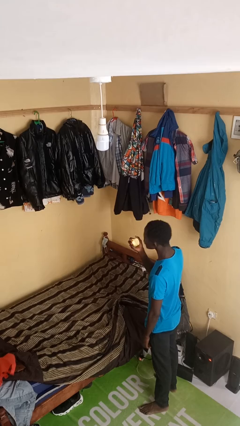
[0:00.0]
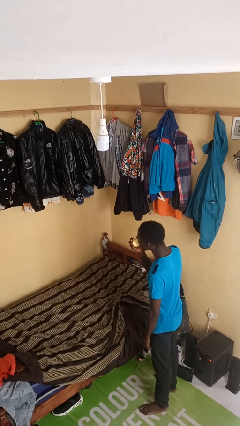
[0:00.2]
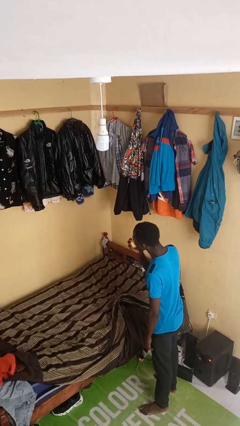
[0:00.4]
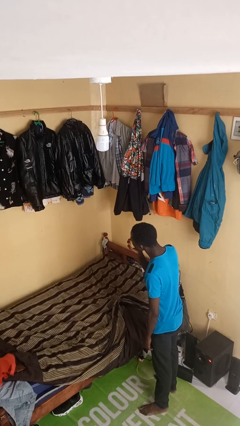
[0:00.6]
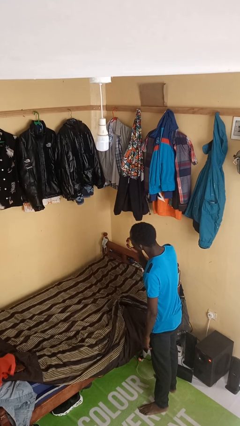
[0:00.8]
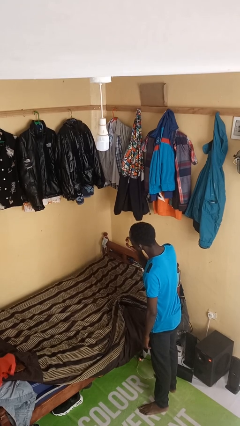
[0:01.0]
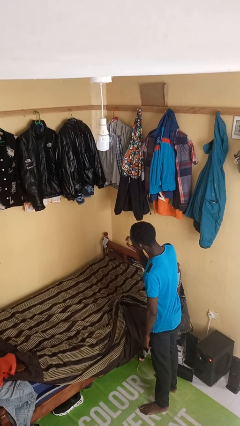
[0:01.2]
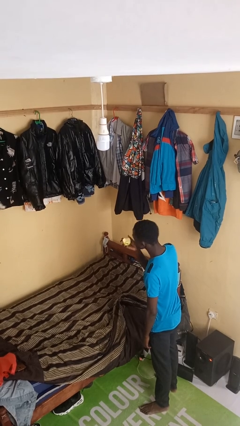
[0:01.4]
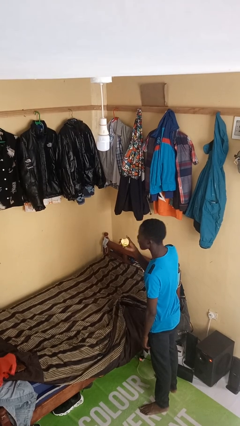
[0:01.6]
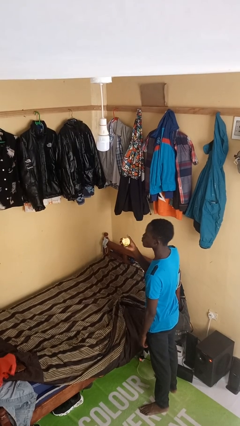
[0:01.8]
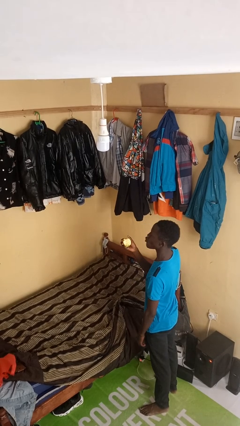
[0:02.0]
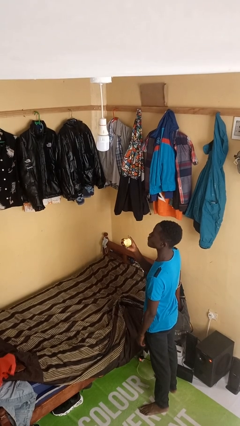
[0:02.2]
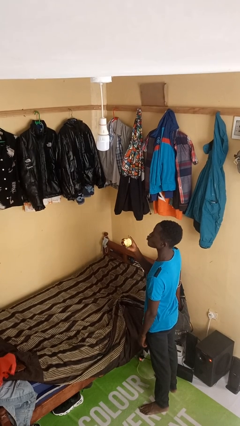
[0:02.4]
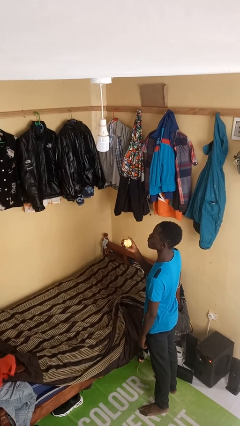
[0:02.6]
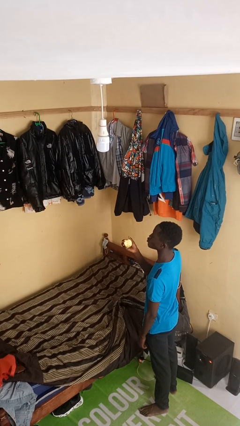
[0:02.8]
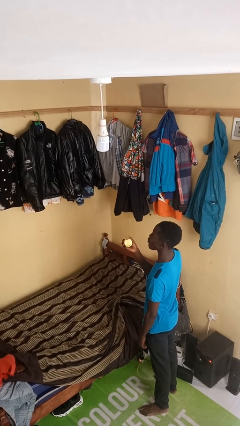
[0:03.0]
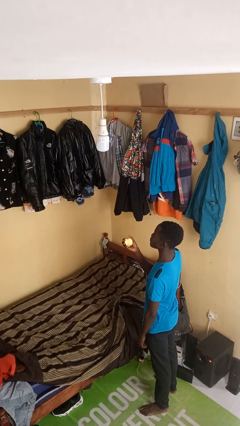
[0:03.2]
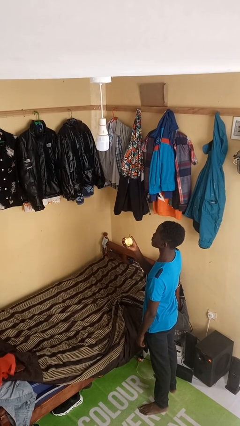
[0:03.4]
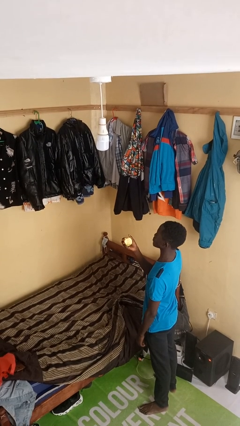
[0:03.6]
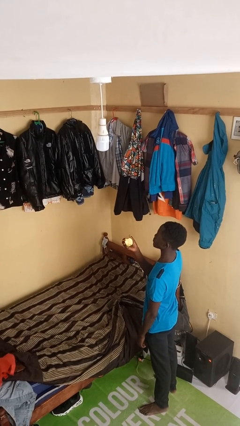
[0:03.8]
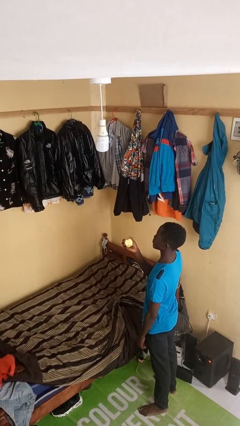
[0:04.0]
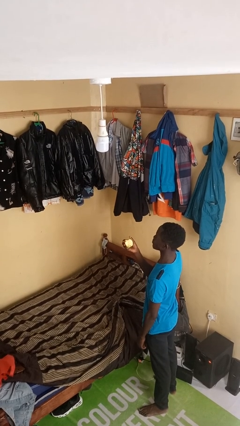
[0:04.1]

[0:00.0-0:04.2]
person eats apple

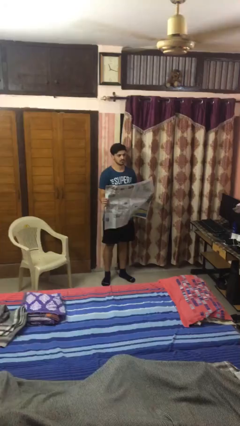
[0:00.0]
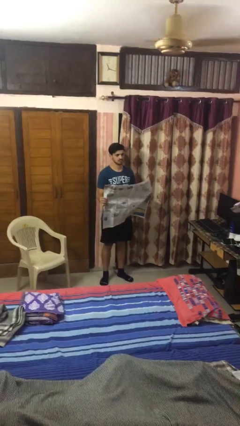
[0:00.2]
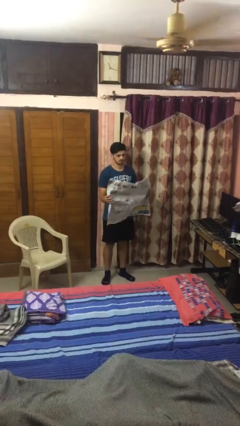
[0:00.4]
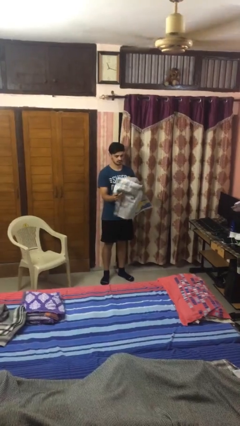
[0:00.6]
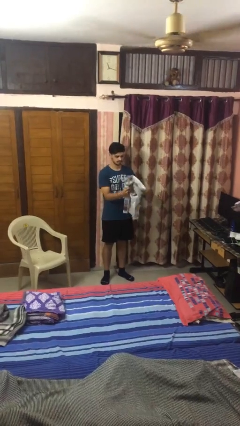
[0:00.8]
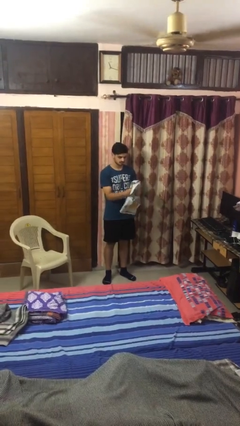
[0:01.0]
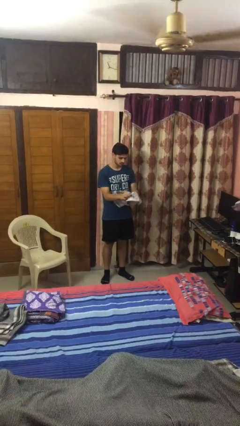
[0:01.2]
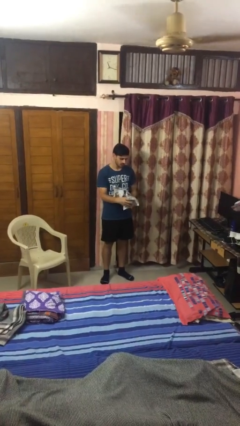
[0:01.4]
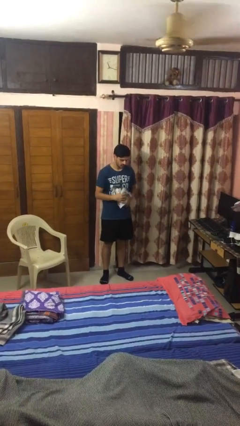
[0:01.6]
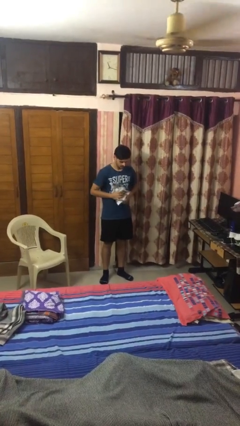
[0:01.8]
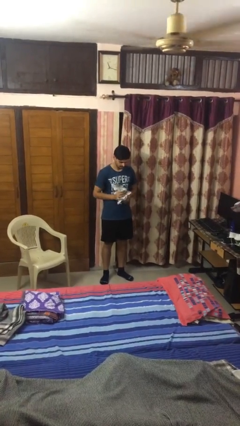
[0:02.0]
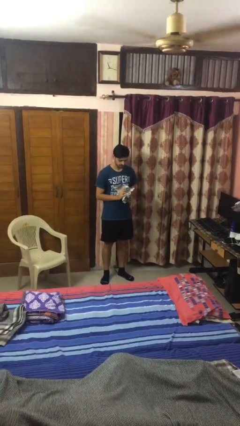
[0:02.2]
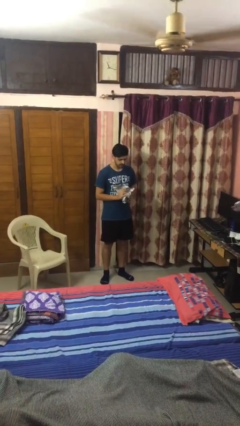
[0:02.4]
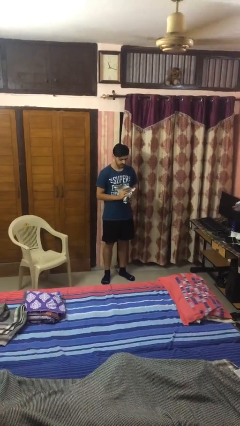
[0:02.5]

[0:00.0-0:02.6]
person crumples paper

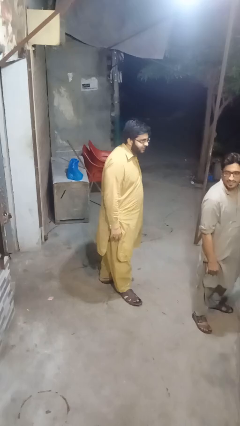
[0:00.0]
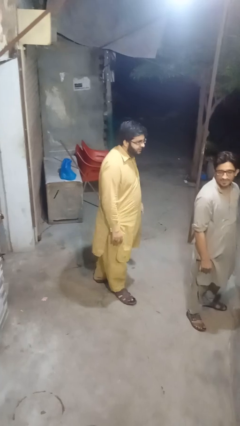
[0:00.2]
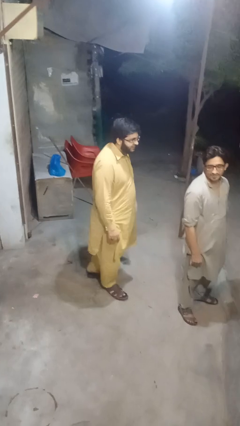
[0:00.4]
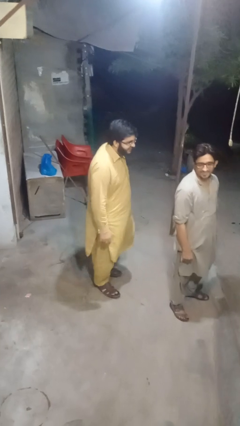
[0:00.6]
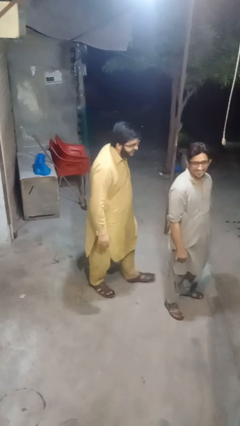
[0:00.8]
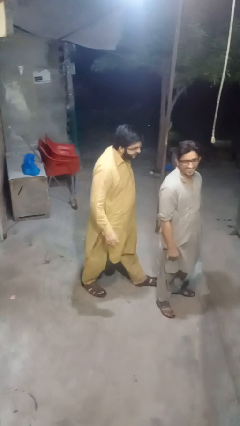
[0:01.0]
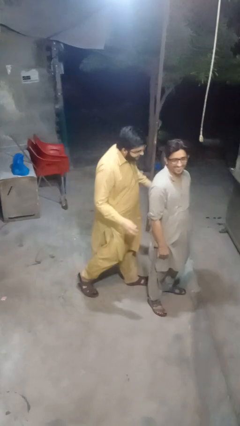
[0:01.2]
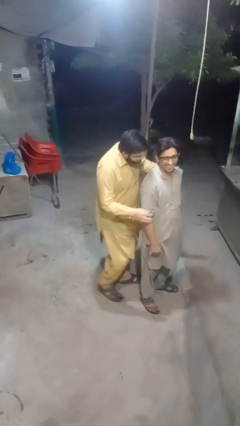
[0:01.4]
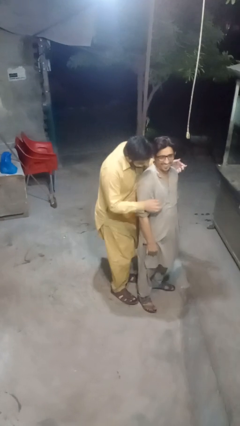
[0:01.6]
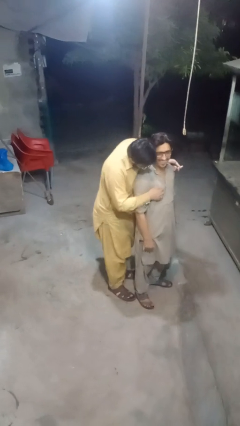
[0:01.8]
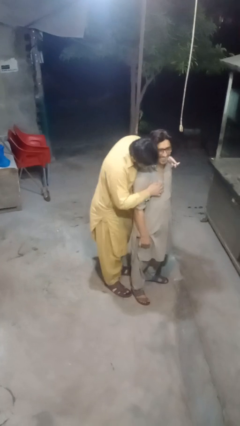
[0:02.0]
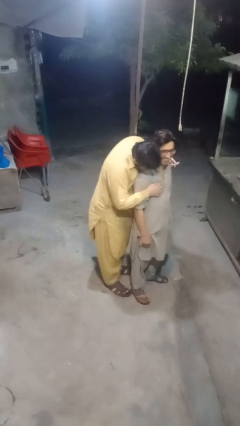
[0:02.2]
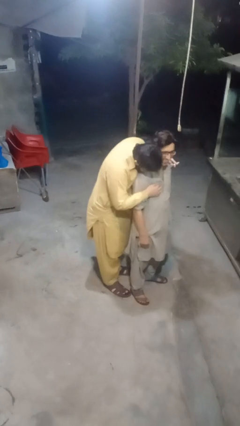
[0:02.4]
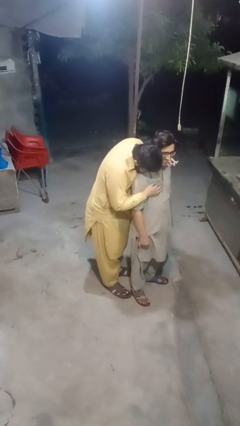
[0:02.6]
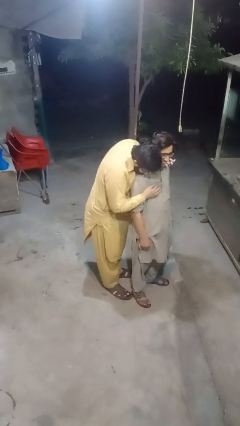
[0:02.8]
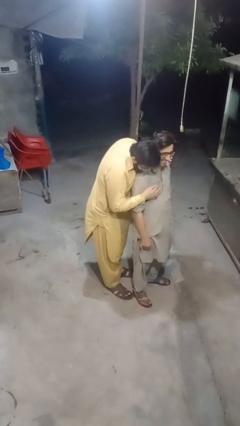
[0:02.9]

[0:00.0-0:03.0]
person hugs person from behind

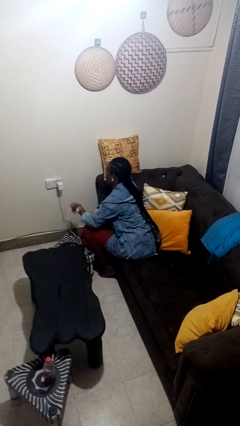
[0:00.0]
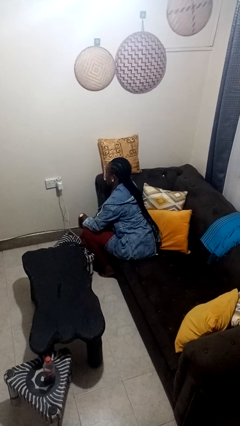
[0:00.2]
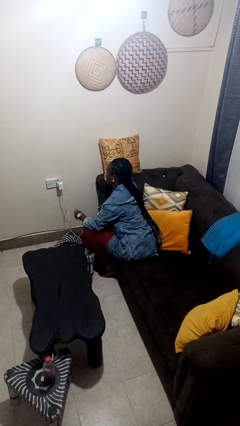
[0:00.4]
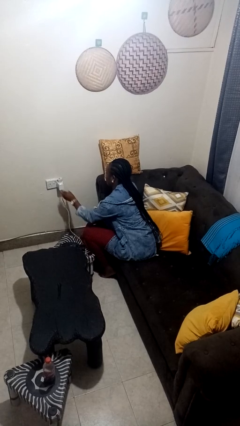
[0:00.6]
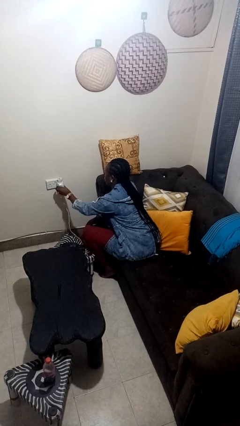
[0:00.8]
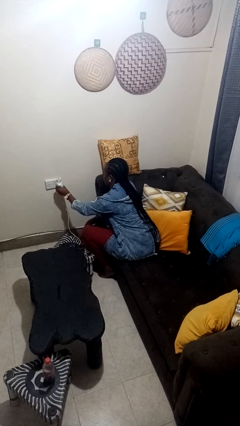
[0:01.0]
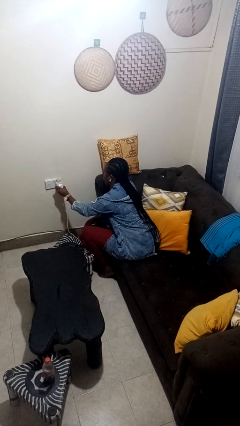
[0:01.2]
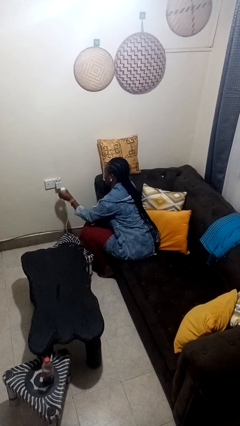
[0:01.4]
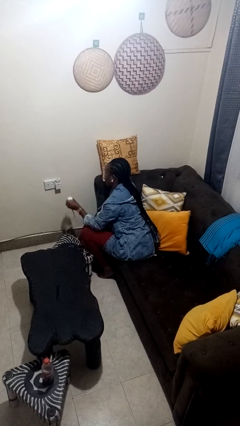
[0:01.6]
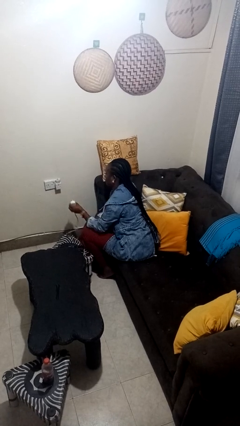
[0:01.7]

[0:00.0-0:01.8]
person unplugs from electrical socket

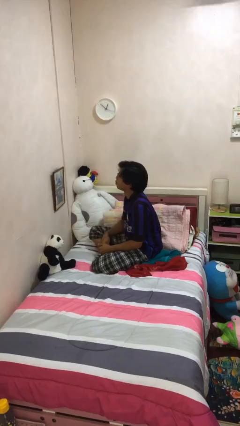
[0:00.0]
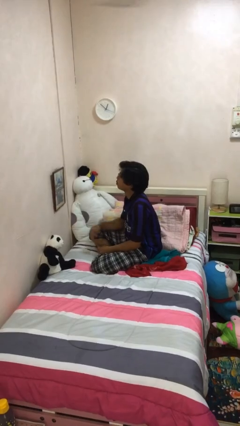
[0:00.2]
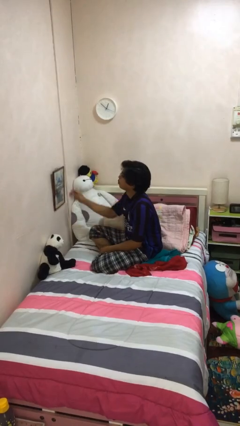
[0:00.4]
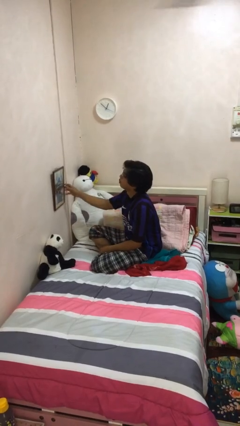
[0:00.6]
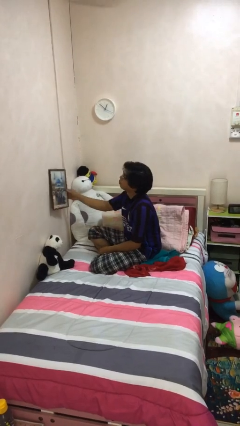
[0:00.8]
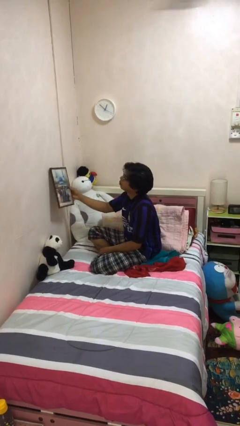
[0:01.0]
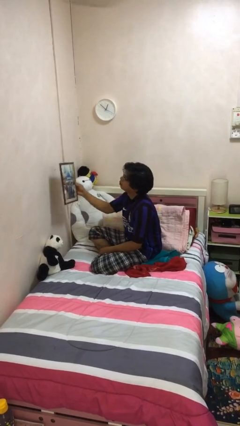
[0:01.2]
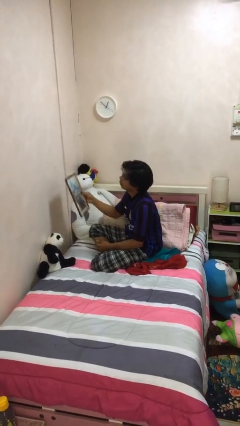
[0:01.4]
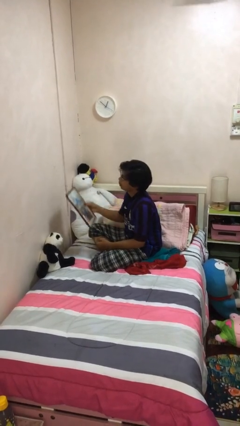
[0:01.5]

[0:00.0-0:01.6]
person takes down picture frame

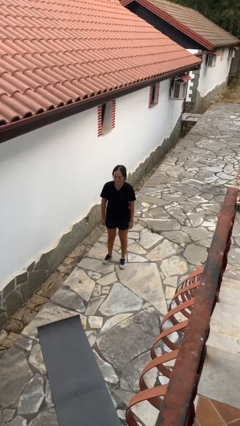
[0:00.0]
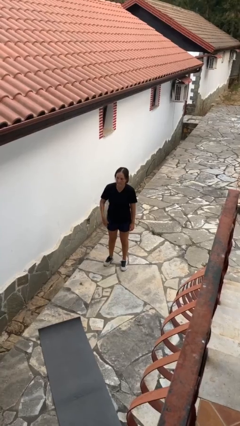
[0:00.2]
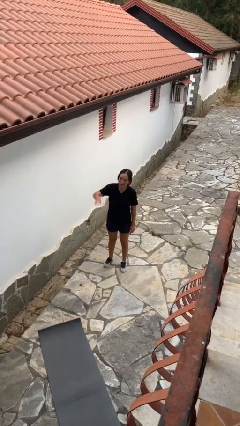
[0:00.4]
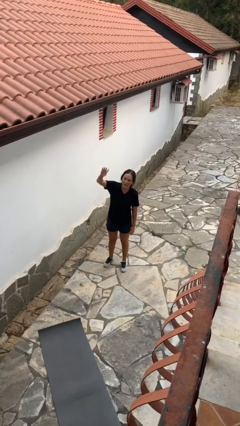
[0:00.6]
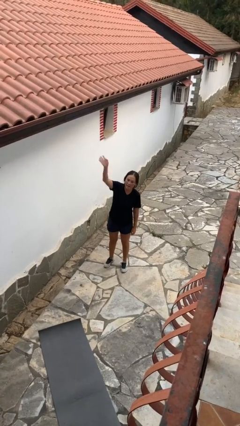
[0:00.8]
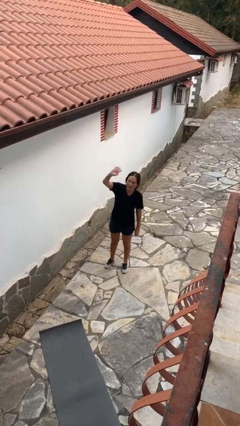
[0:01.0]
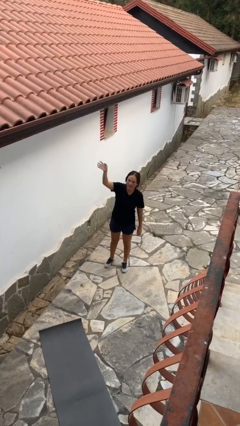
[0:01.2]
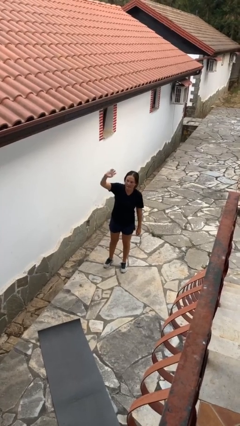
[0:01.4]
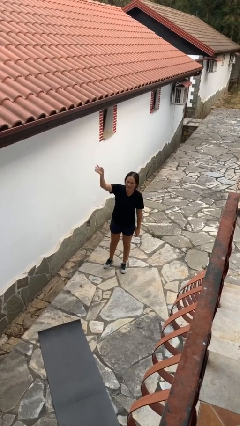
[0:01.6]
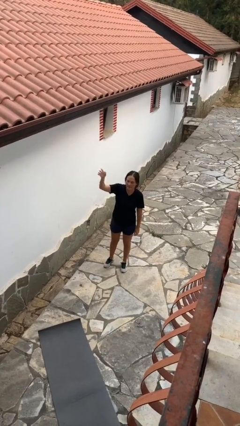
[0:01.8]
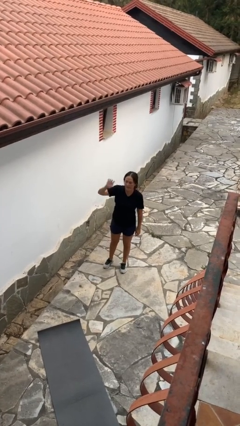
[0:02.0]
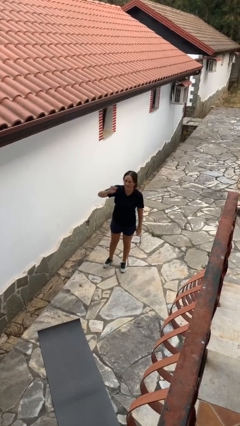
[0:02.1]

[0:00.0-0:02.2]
person gestures raise hand

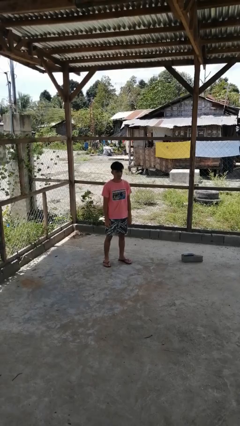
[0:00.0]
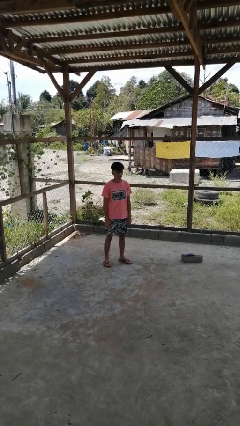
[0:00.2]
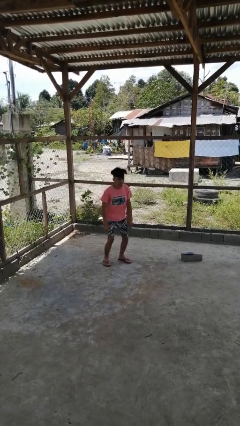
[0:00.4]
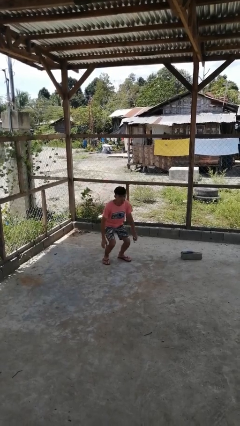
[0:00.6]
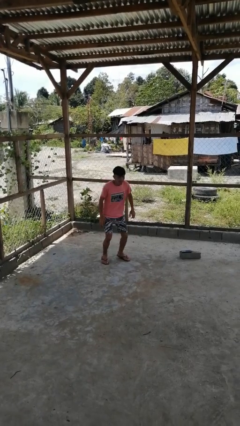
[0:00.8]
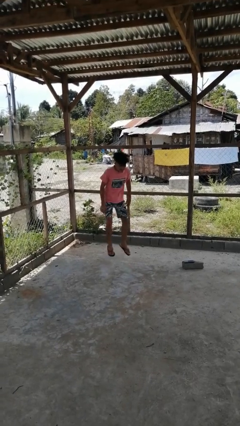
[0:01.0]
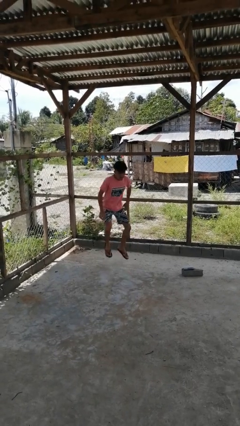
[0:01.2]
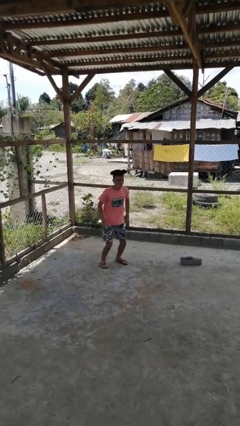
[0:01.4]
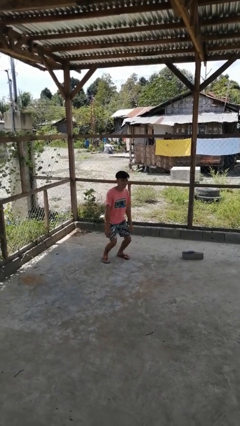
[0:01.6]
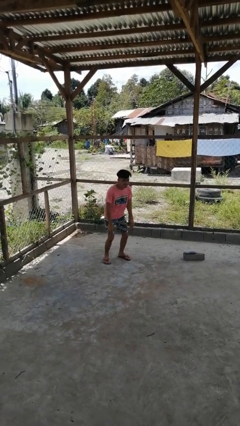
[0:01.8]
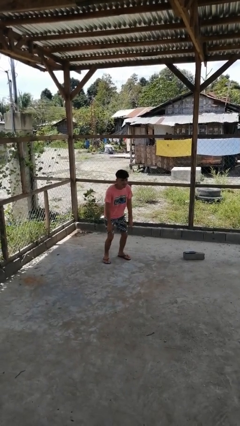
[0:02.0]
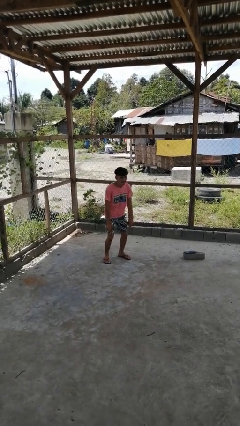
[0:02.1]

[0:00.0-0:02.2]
person jumps
